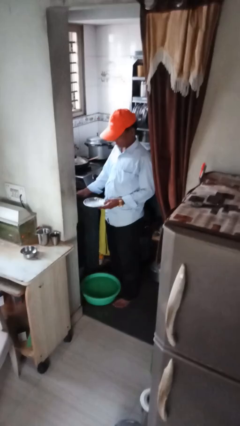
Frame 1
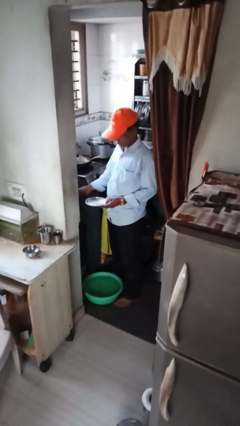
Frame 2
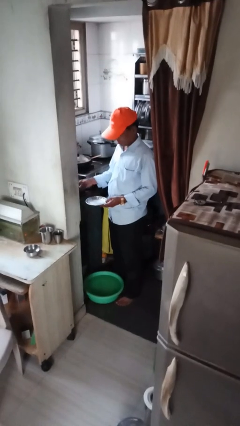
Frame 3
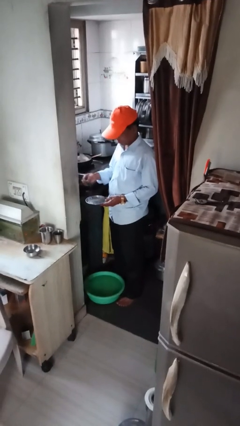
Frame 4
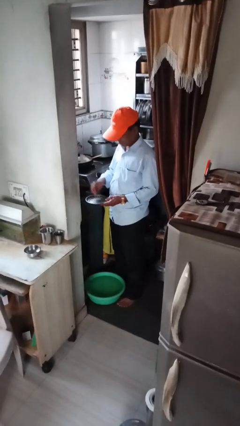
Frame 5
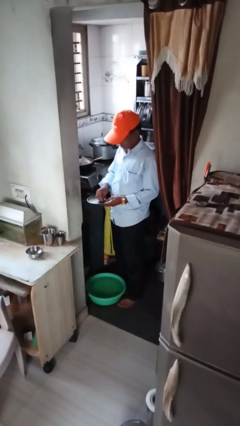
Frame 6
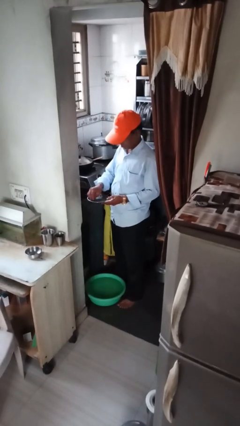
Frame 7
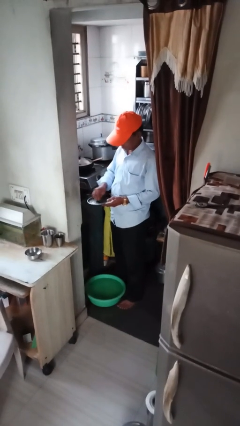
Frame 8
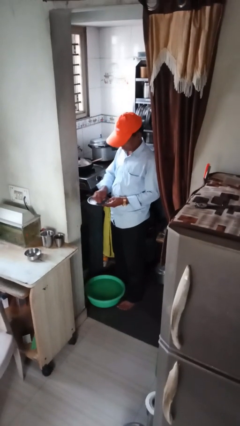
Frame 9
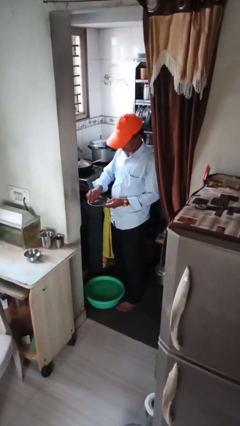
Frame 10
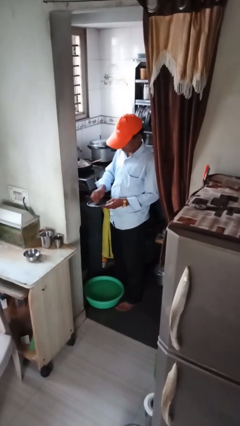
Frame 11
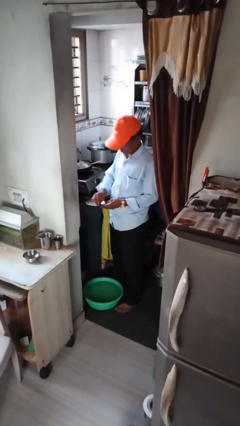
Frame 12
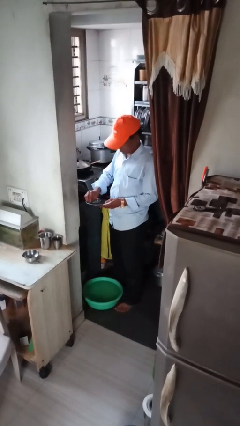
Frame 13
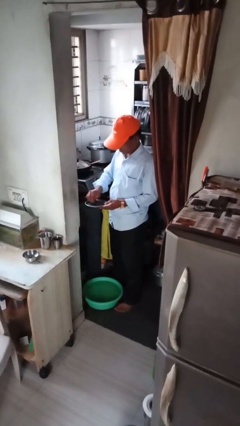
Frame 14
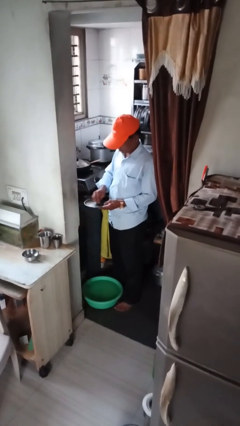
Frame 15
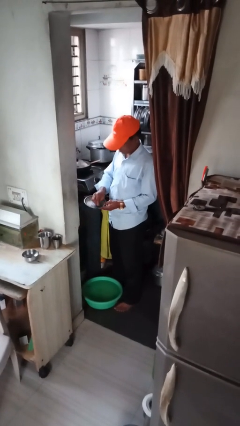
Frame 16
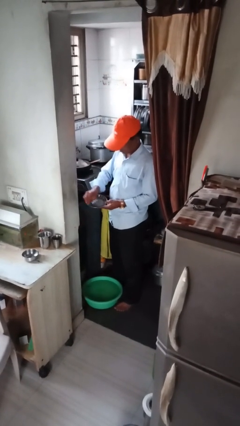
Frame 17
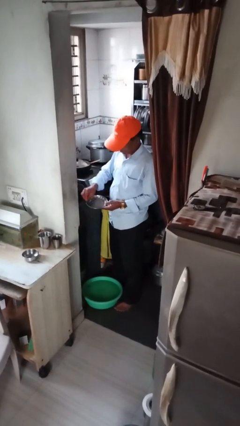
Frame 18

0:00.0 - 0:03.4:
person washes dish

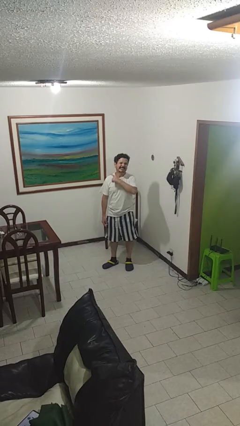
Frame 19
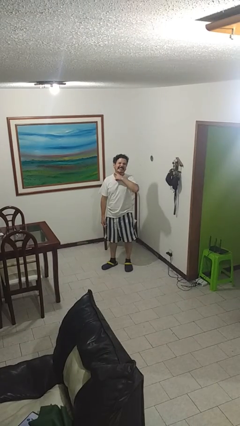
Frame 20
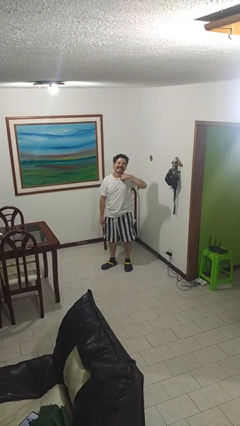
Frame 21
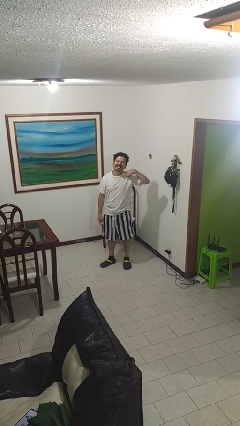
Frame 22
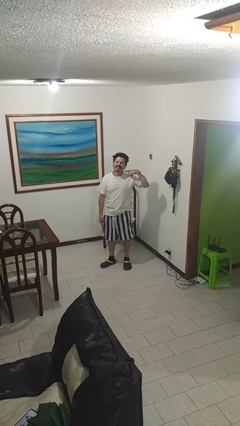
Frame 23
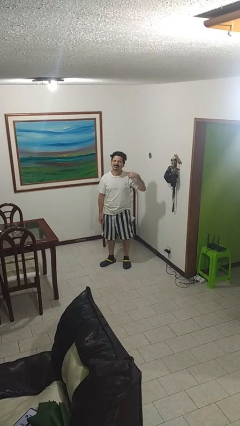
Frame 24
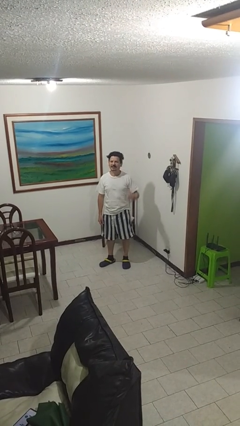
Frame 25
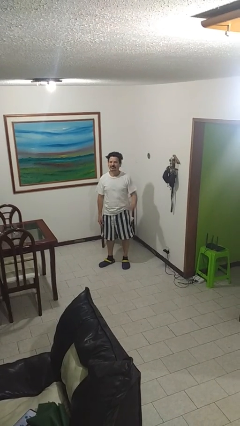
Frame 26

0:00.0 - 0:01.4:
person gestures cut

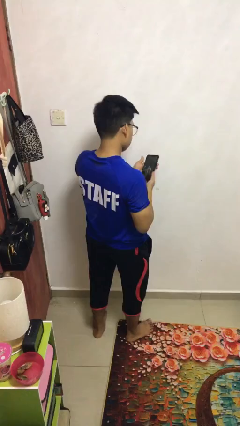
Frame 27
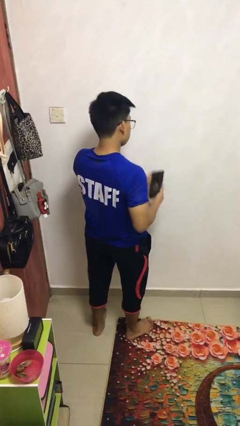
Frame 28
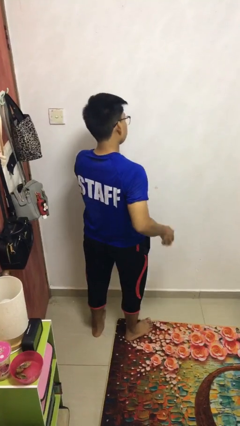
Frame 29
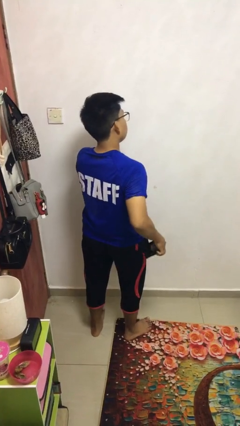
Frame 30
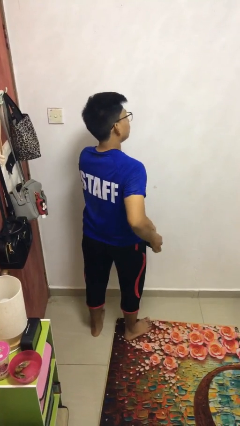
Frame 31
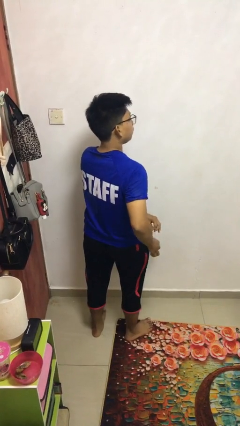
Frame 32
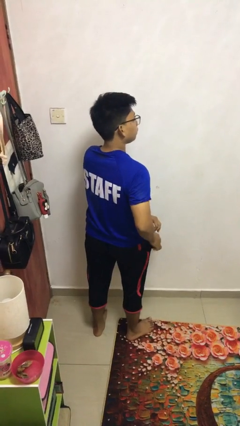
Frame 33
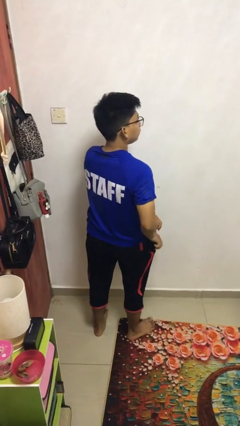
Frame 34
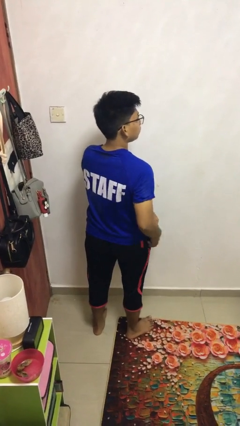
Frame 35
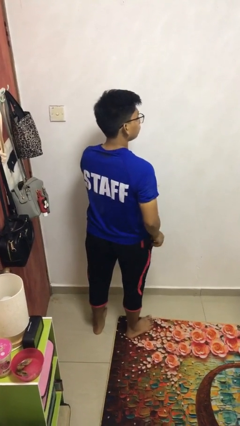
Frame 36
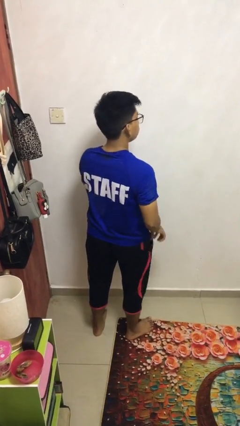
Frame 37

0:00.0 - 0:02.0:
person puts phone into pocket

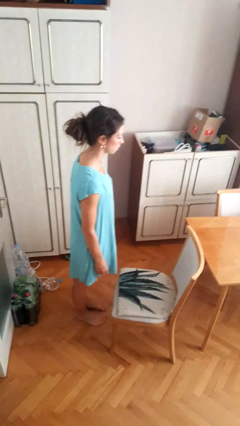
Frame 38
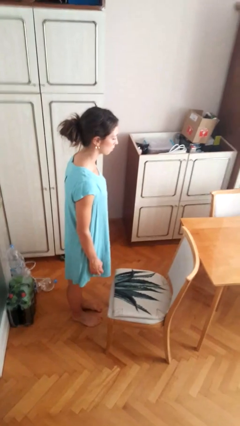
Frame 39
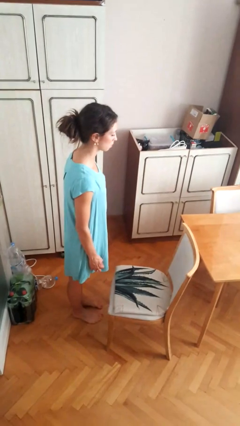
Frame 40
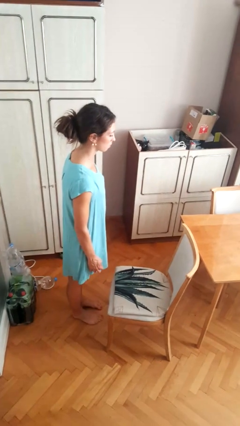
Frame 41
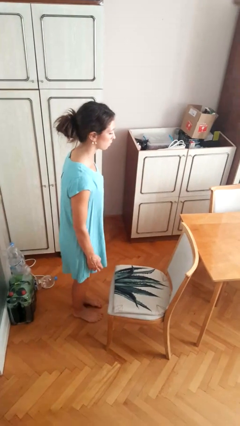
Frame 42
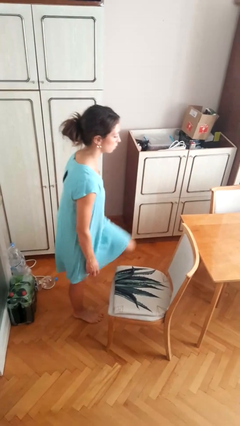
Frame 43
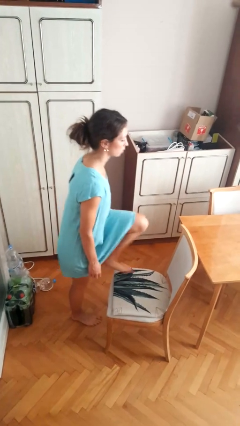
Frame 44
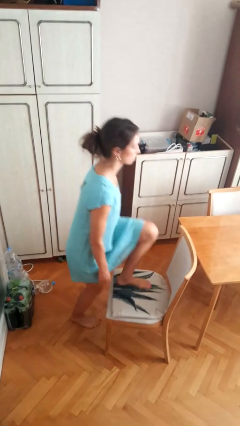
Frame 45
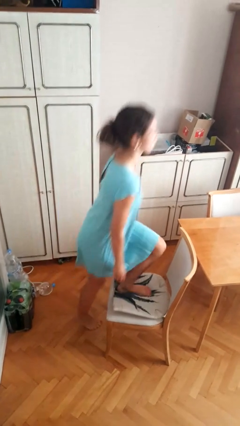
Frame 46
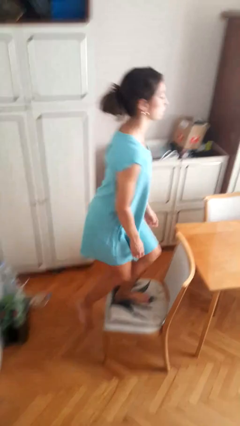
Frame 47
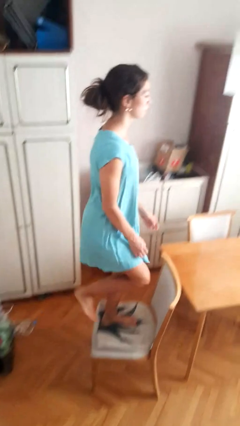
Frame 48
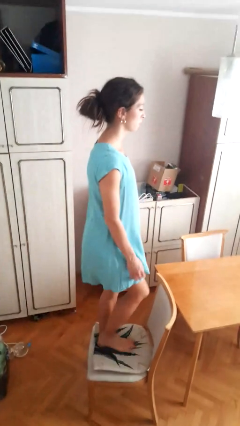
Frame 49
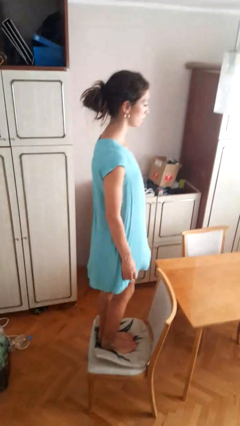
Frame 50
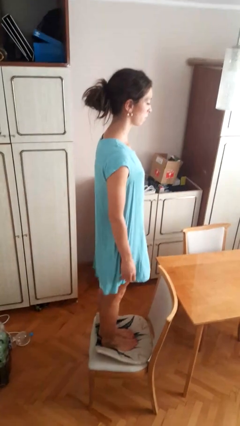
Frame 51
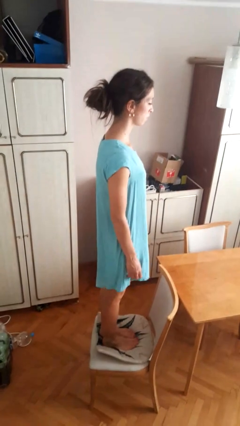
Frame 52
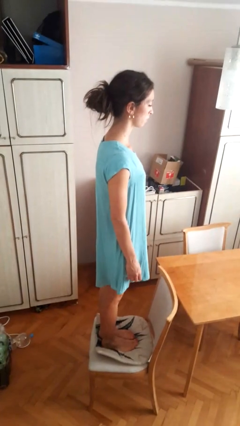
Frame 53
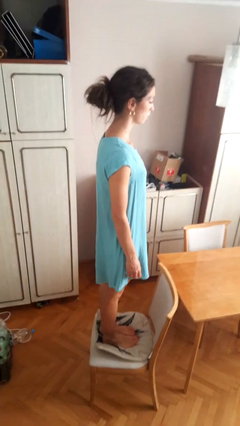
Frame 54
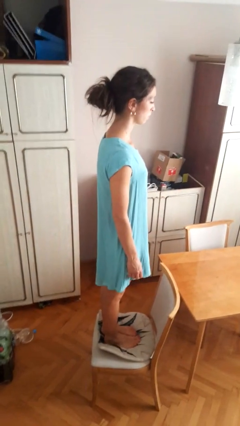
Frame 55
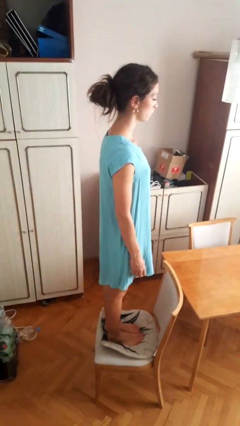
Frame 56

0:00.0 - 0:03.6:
person climbs on chair

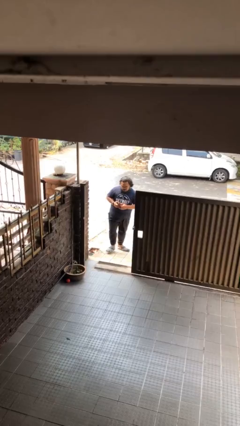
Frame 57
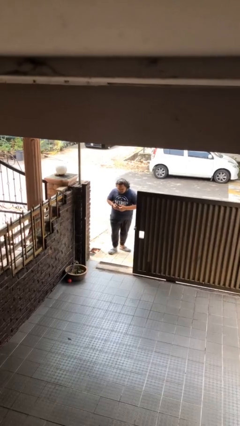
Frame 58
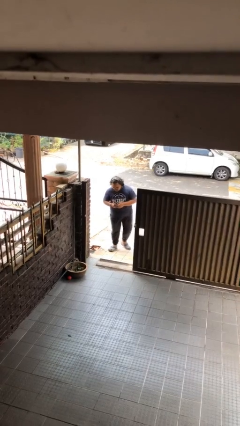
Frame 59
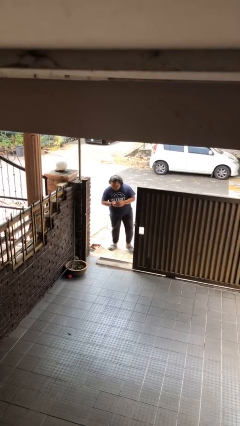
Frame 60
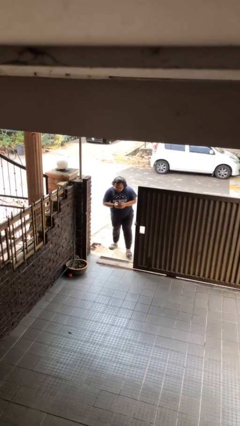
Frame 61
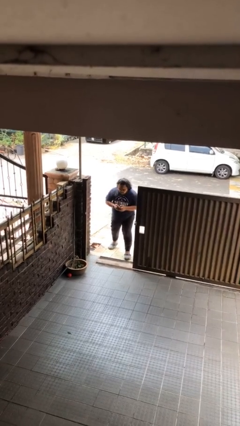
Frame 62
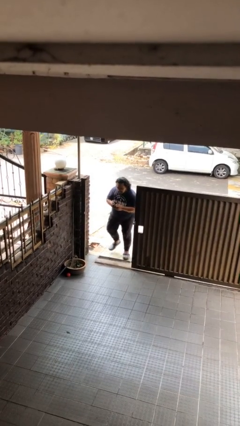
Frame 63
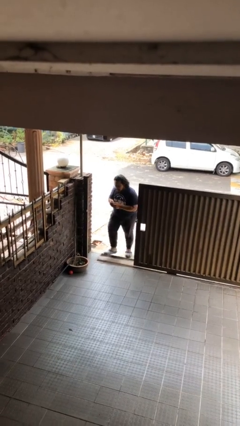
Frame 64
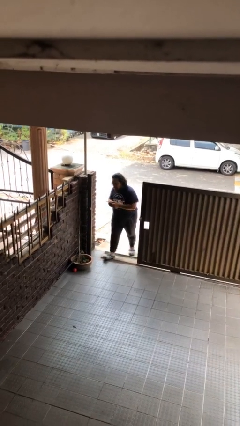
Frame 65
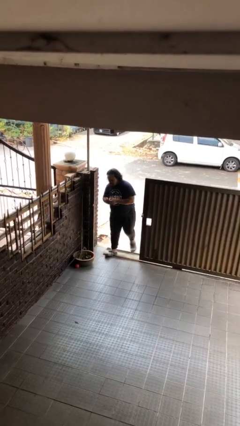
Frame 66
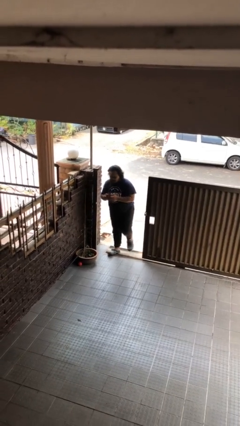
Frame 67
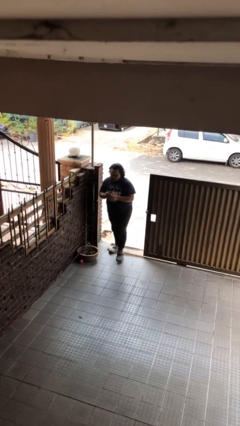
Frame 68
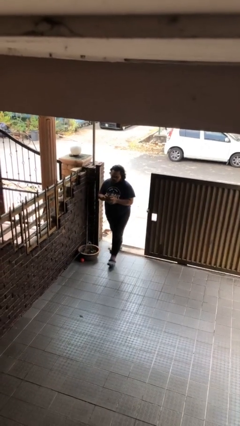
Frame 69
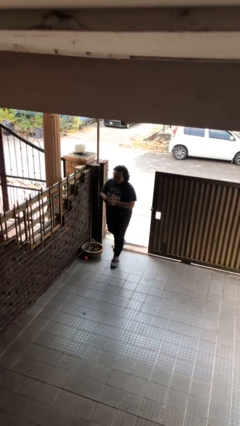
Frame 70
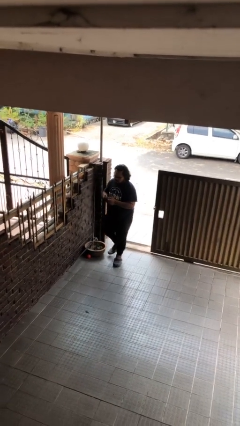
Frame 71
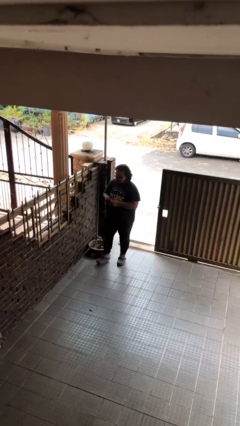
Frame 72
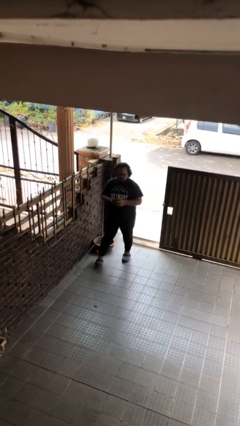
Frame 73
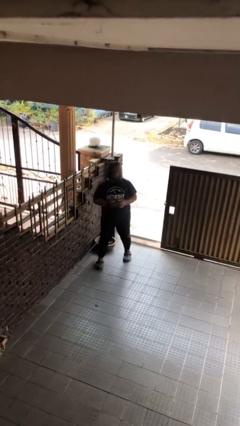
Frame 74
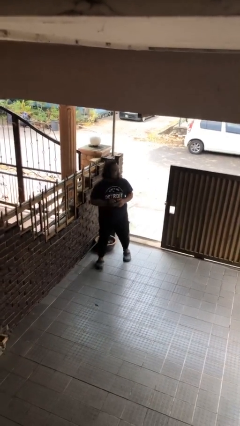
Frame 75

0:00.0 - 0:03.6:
person enters scene through structure

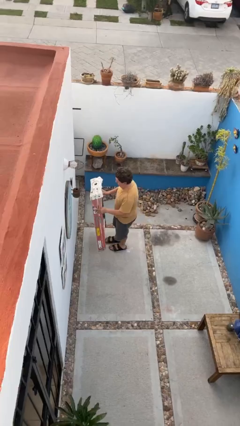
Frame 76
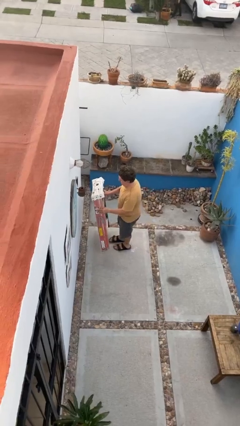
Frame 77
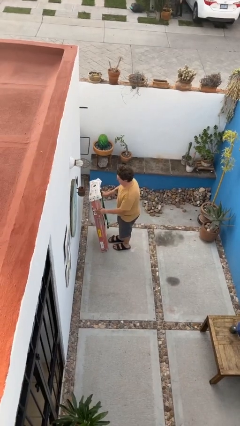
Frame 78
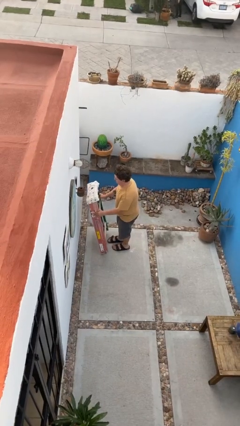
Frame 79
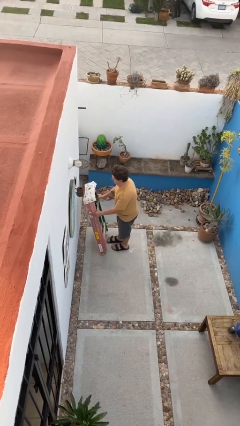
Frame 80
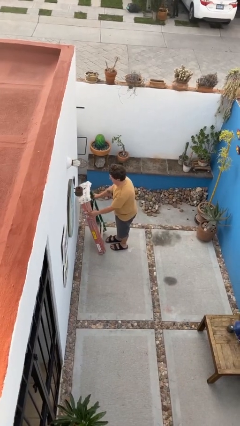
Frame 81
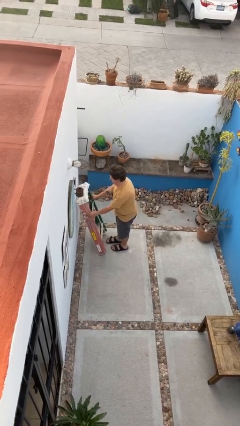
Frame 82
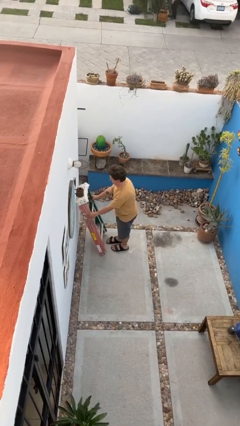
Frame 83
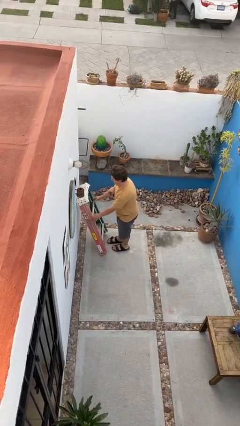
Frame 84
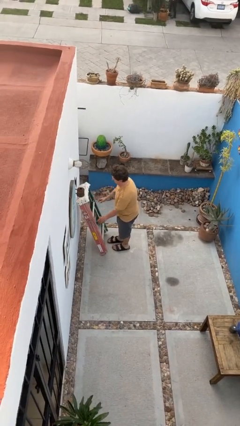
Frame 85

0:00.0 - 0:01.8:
person puts down object on floor

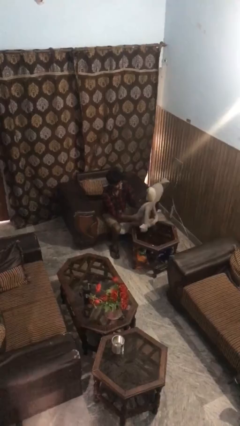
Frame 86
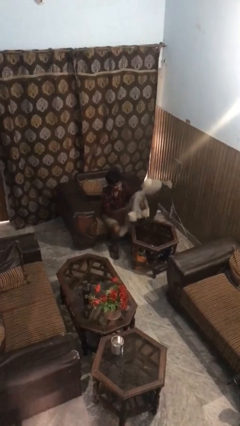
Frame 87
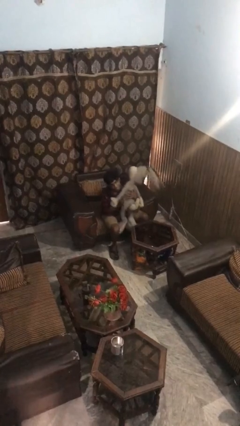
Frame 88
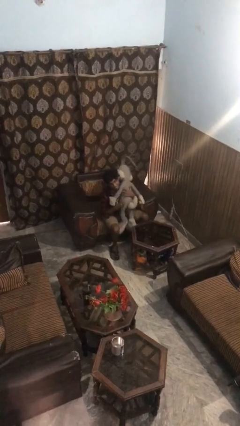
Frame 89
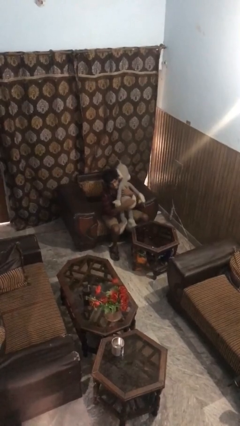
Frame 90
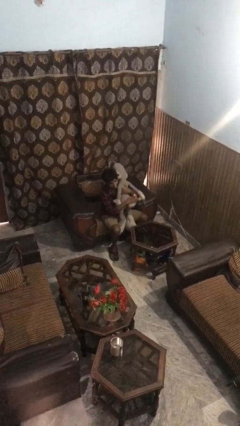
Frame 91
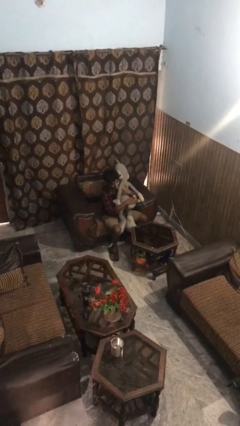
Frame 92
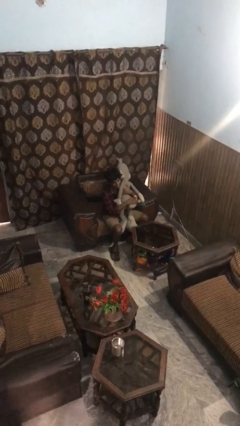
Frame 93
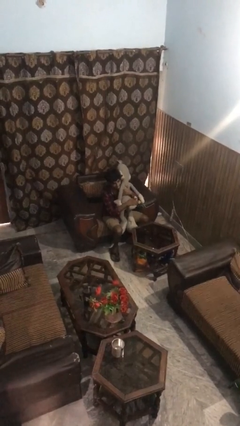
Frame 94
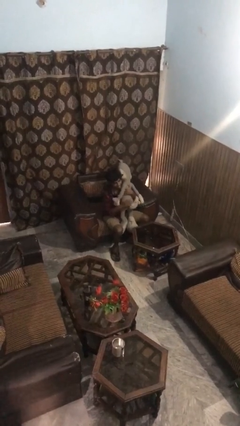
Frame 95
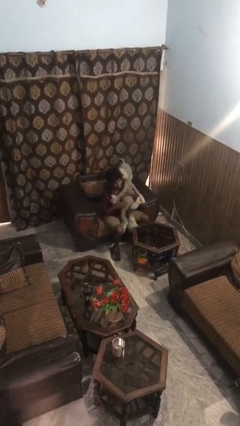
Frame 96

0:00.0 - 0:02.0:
person hugs stuffed animal
